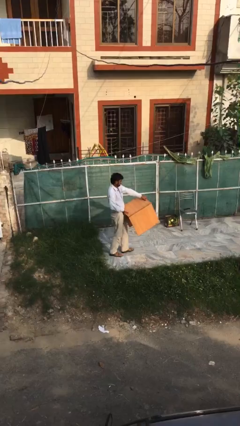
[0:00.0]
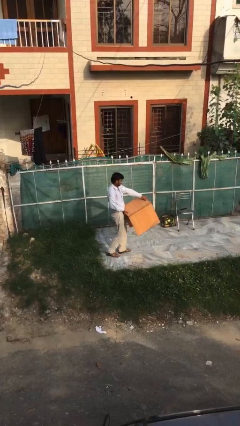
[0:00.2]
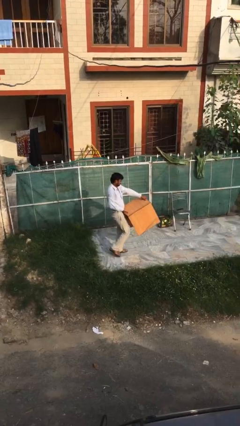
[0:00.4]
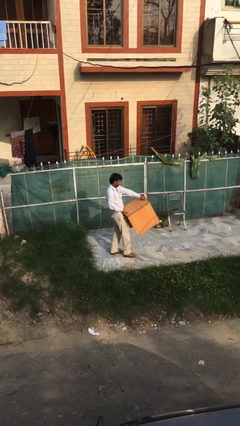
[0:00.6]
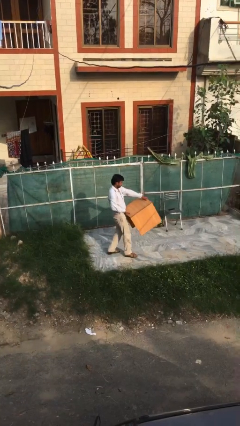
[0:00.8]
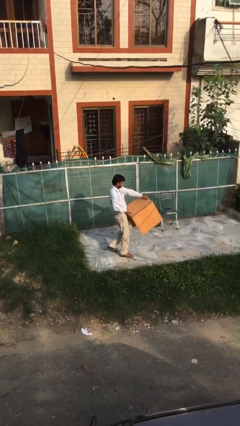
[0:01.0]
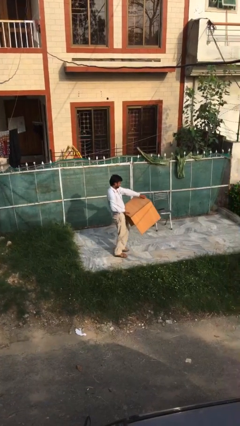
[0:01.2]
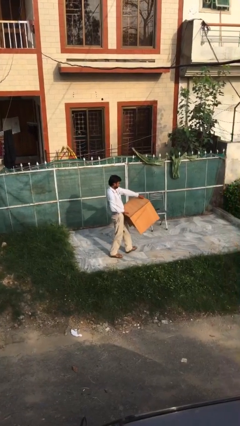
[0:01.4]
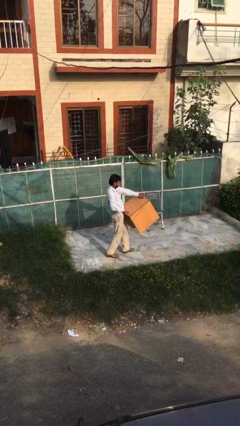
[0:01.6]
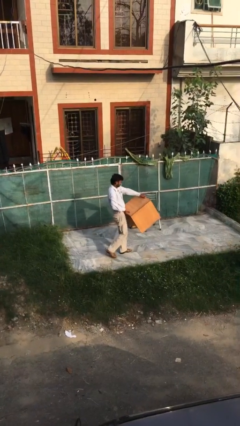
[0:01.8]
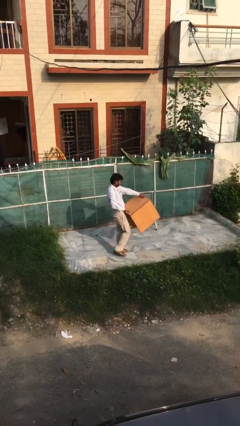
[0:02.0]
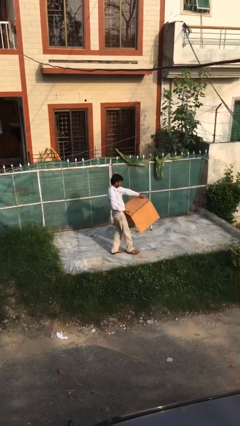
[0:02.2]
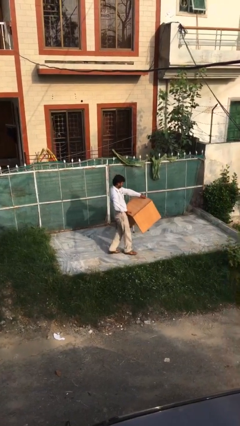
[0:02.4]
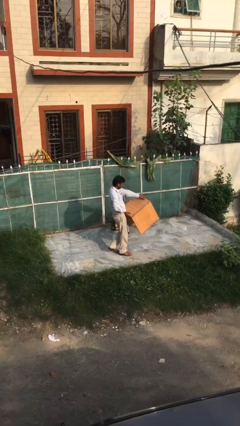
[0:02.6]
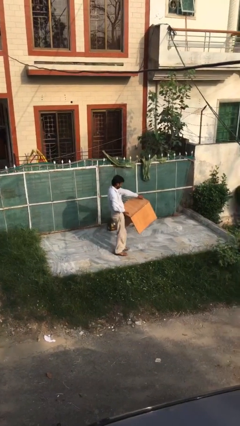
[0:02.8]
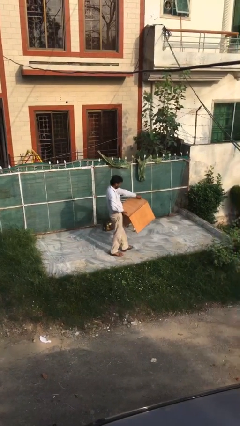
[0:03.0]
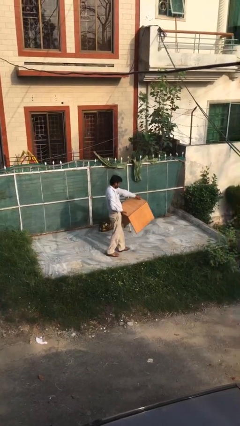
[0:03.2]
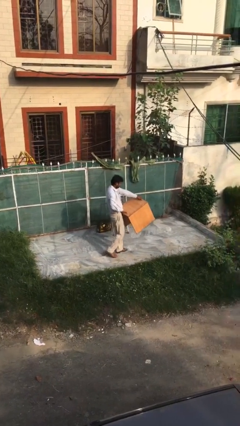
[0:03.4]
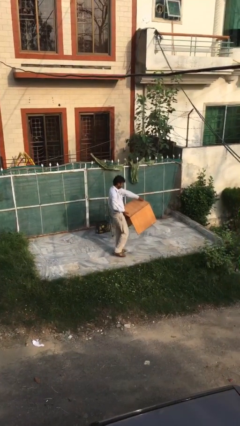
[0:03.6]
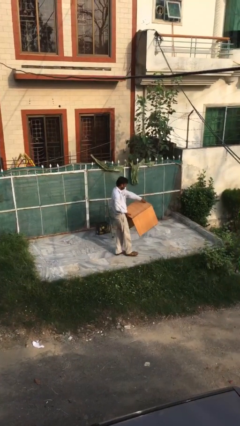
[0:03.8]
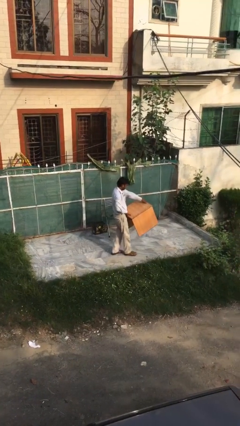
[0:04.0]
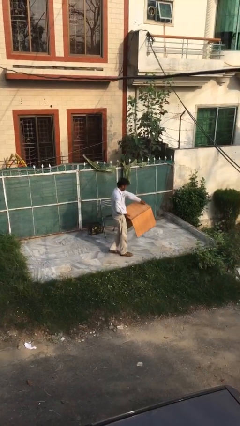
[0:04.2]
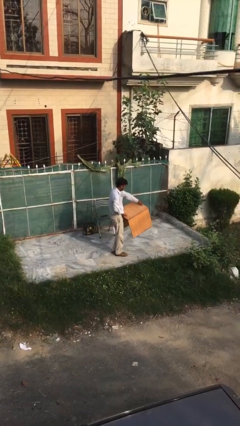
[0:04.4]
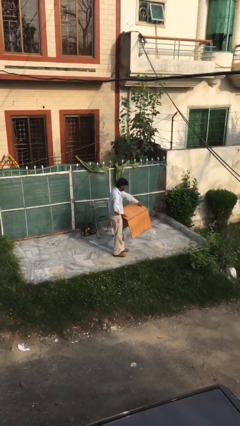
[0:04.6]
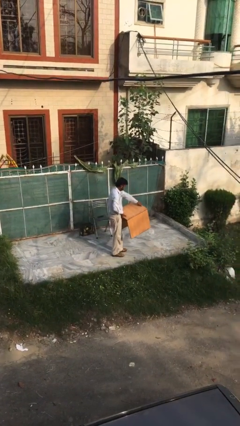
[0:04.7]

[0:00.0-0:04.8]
person carries heavy object

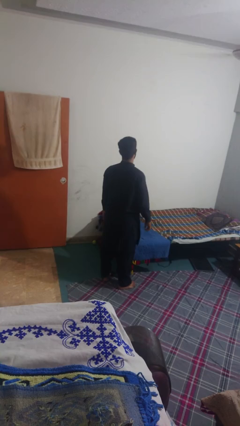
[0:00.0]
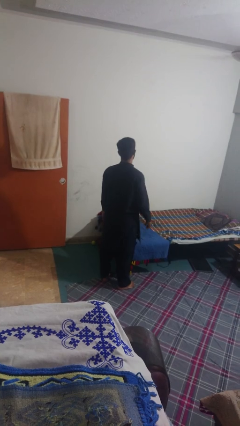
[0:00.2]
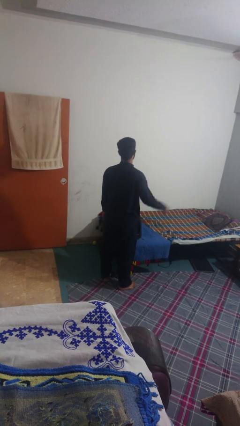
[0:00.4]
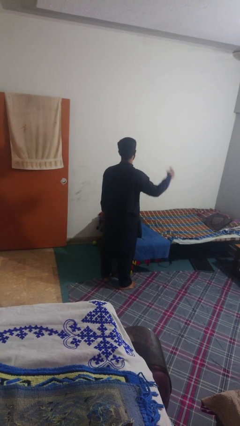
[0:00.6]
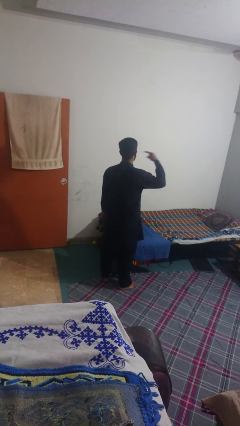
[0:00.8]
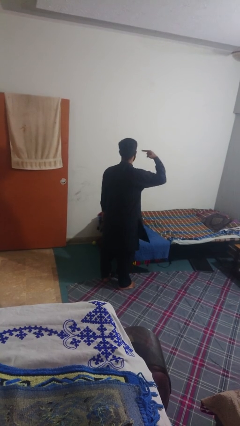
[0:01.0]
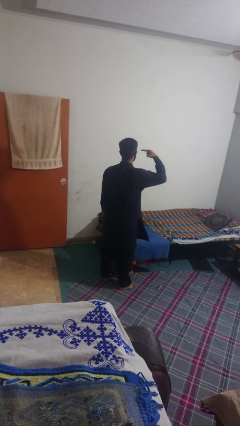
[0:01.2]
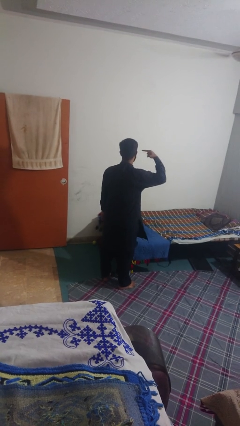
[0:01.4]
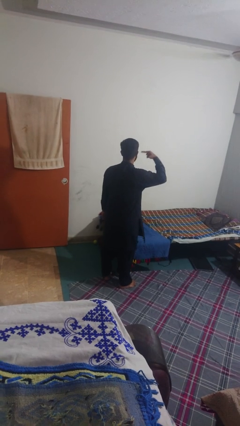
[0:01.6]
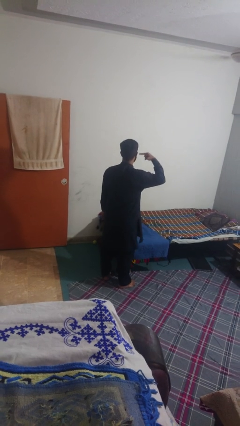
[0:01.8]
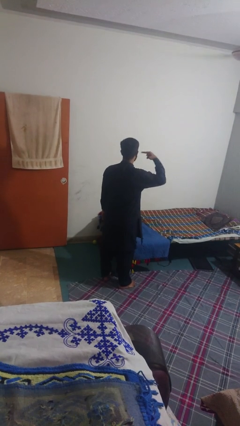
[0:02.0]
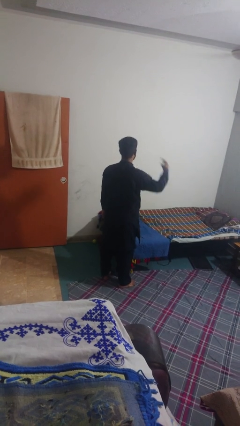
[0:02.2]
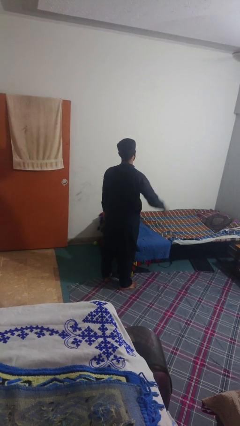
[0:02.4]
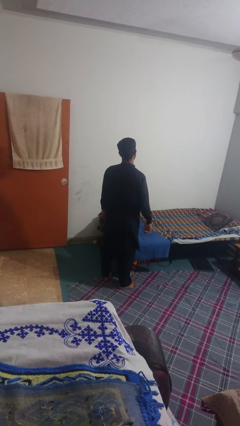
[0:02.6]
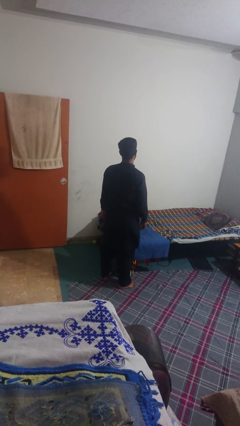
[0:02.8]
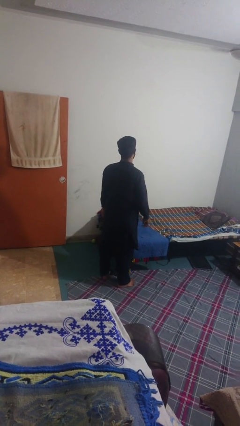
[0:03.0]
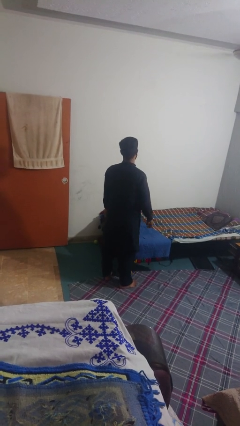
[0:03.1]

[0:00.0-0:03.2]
person gestures listen closely

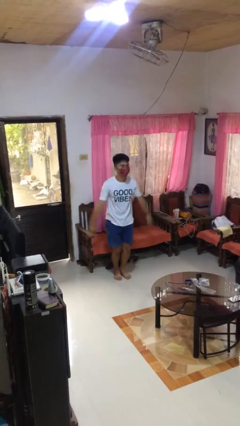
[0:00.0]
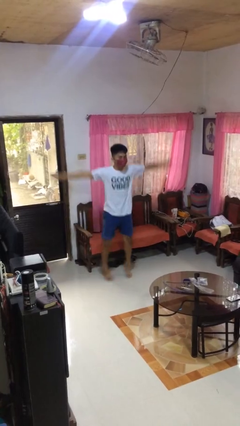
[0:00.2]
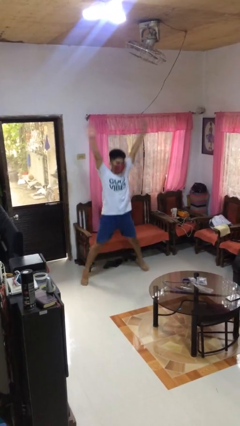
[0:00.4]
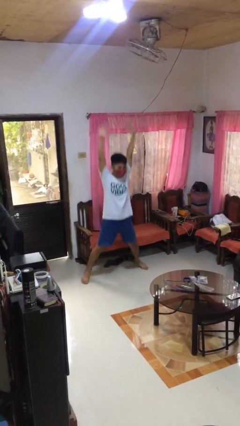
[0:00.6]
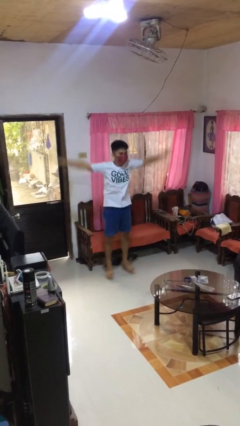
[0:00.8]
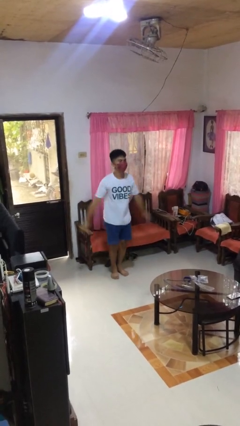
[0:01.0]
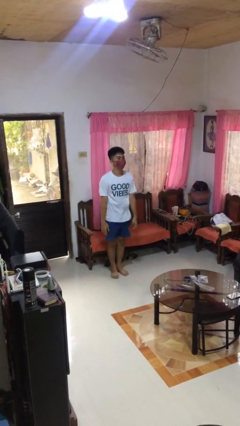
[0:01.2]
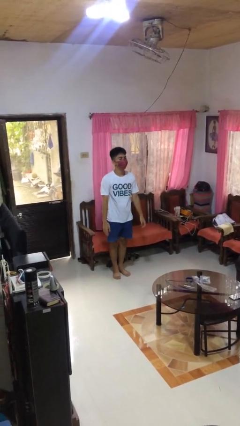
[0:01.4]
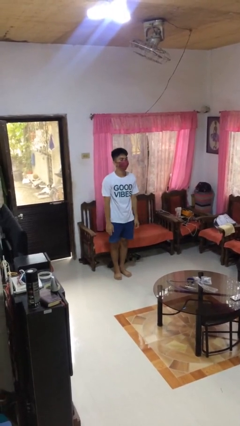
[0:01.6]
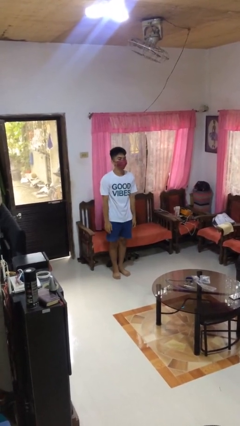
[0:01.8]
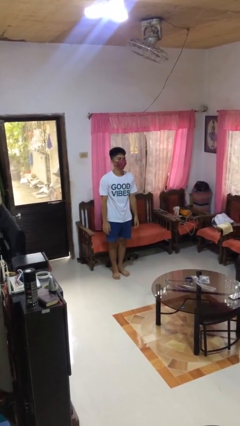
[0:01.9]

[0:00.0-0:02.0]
person exercises with jumping jacks

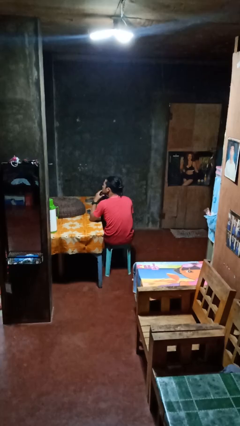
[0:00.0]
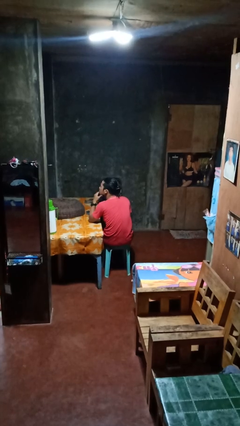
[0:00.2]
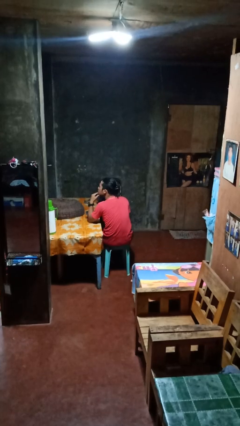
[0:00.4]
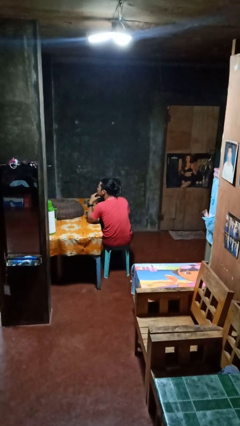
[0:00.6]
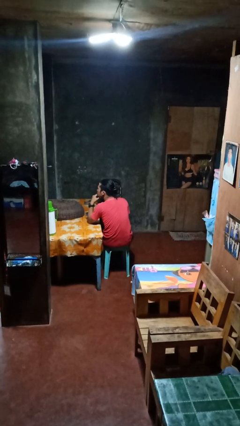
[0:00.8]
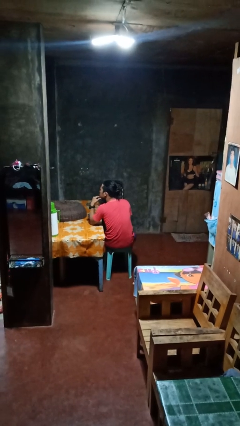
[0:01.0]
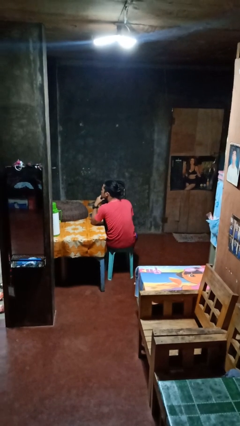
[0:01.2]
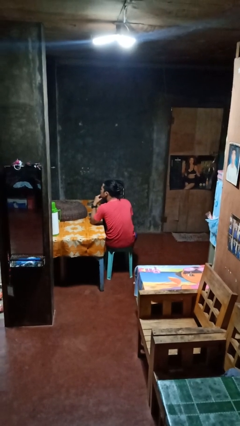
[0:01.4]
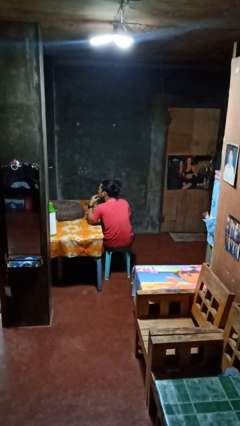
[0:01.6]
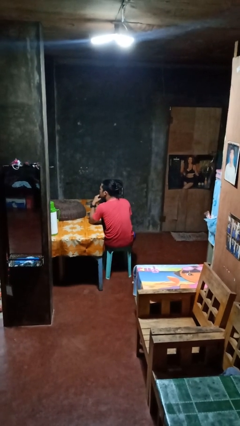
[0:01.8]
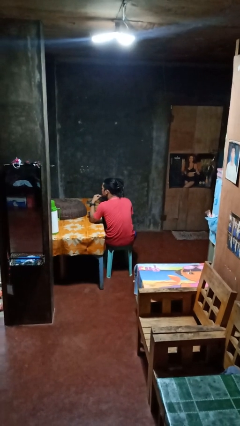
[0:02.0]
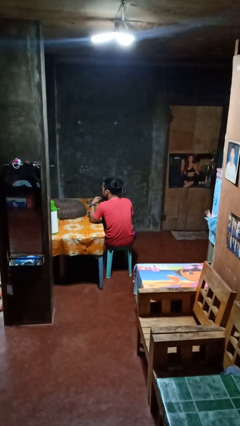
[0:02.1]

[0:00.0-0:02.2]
person strokes chin

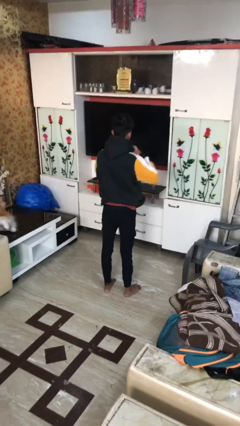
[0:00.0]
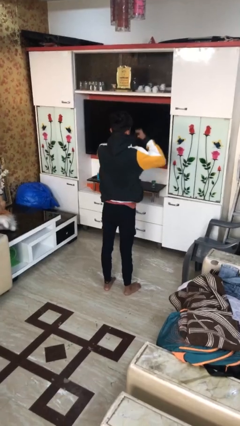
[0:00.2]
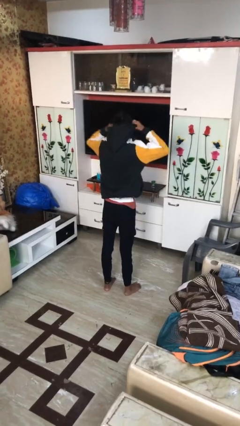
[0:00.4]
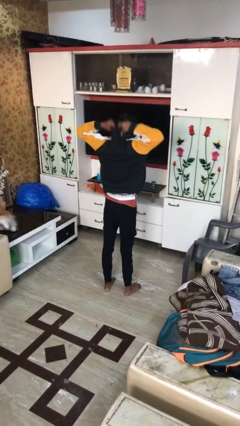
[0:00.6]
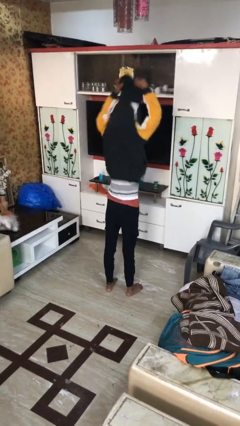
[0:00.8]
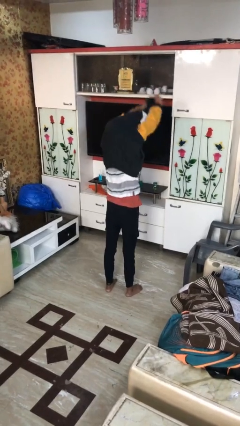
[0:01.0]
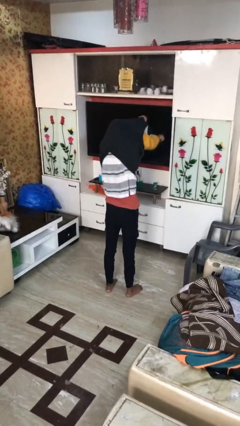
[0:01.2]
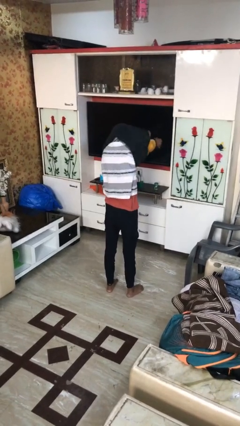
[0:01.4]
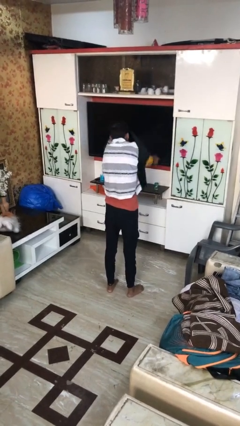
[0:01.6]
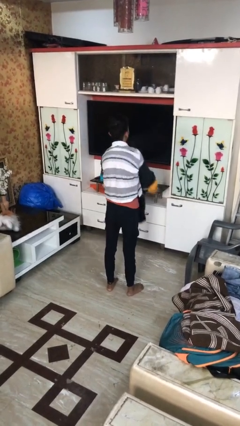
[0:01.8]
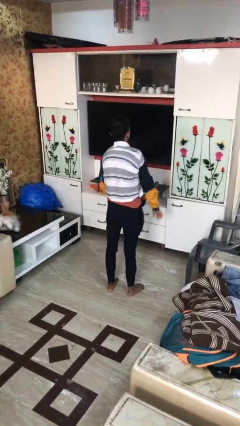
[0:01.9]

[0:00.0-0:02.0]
person takes off hoodie

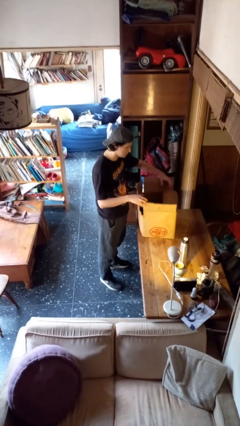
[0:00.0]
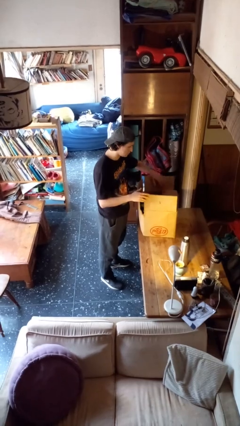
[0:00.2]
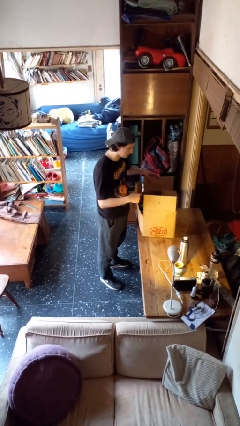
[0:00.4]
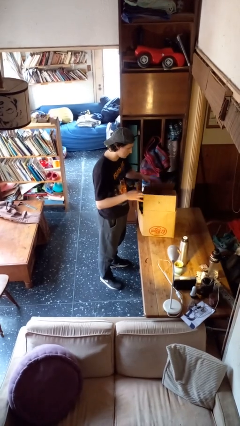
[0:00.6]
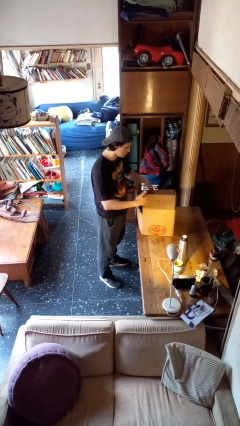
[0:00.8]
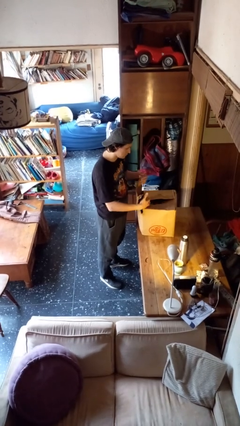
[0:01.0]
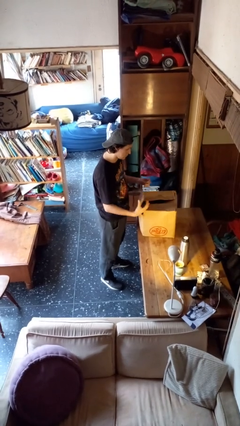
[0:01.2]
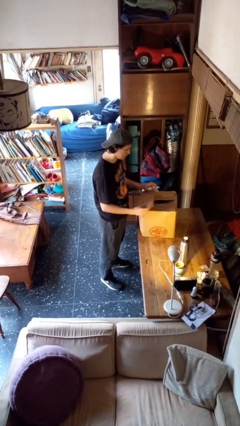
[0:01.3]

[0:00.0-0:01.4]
person closes box

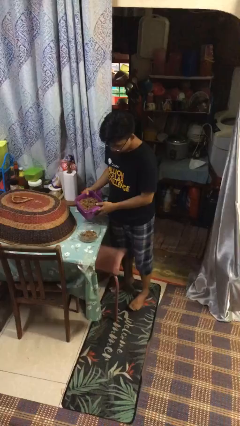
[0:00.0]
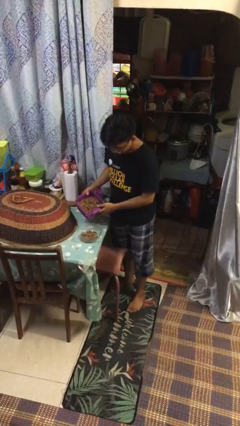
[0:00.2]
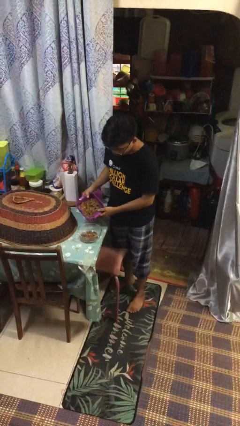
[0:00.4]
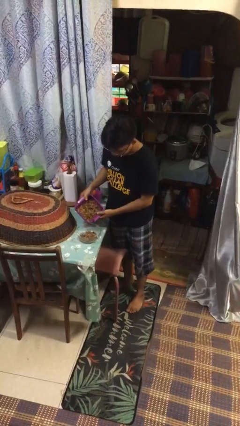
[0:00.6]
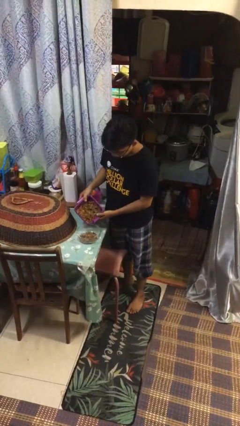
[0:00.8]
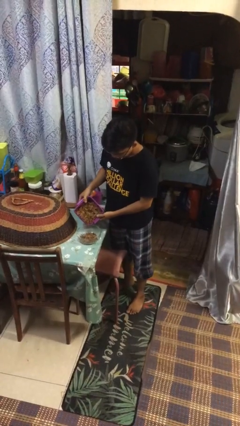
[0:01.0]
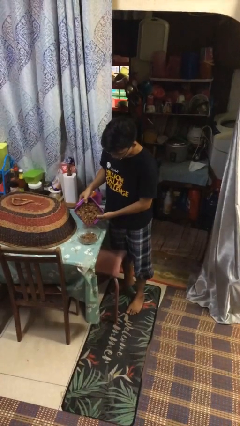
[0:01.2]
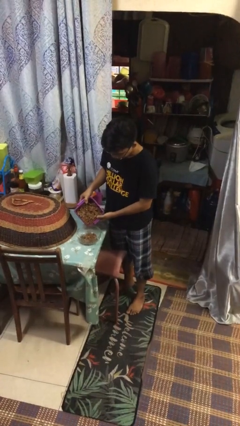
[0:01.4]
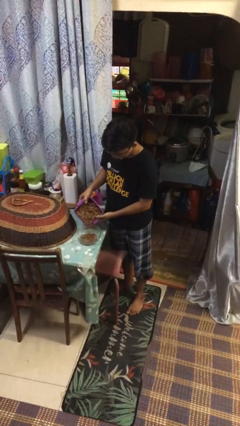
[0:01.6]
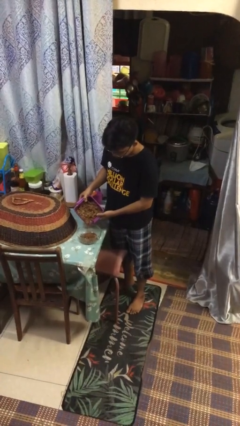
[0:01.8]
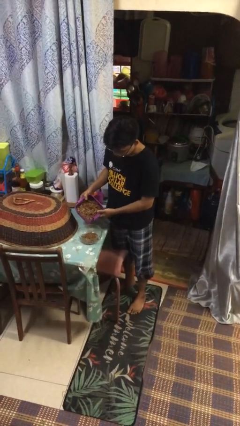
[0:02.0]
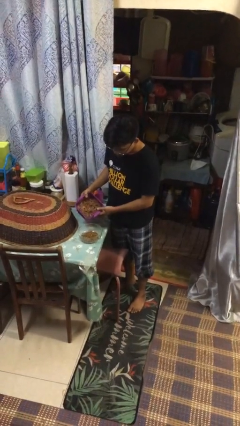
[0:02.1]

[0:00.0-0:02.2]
person pours into bowl
